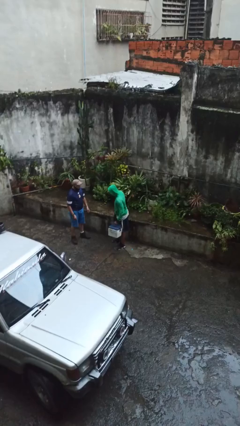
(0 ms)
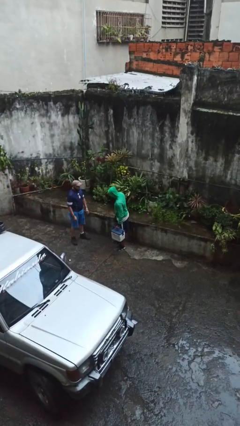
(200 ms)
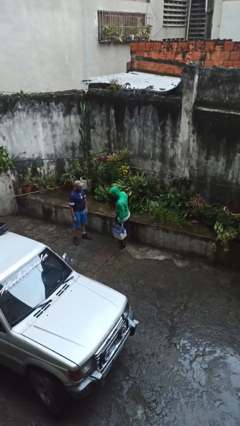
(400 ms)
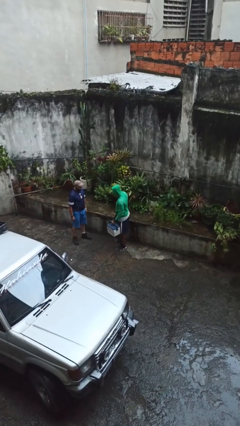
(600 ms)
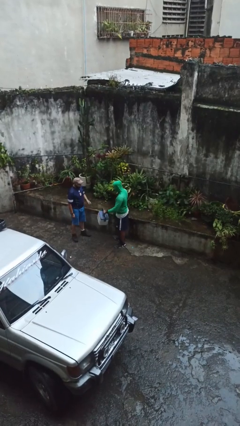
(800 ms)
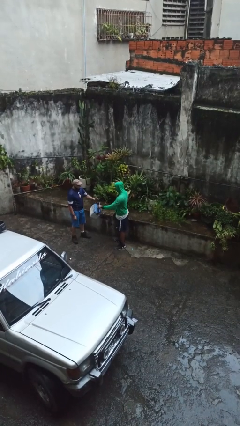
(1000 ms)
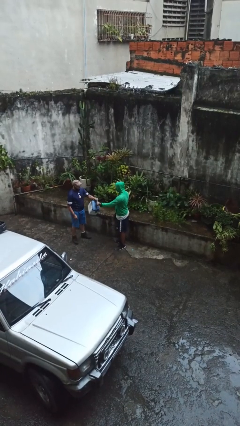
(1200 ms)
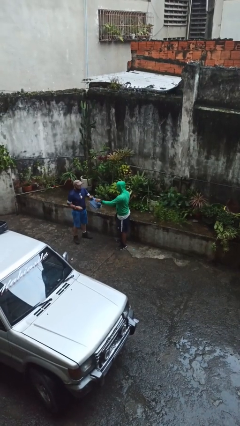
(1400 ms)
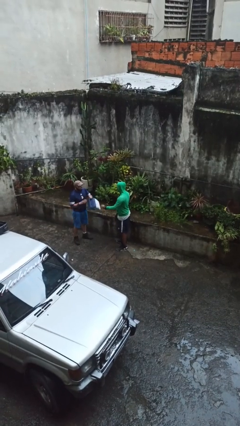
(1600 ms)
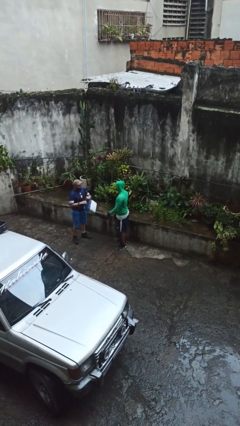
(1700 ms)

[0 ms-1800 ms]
person transfers object to person

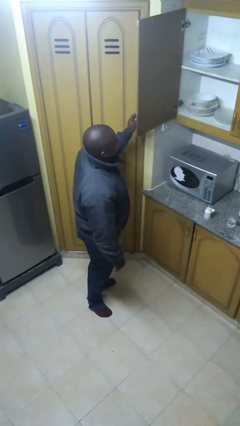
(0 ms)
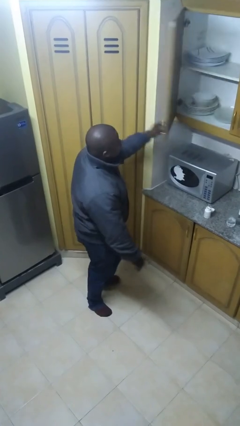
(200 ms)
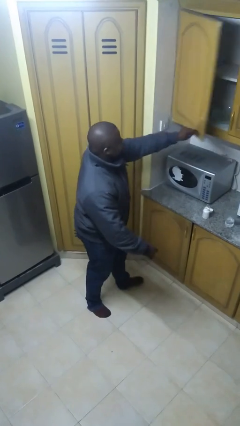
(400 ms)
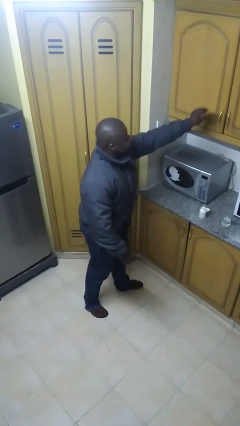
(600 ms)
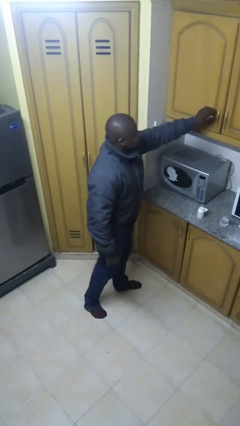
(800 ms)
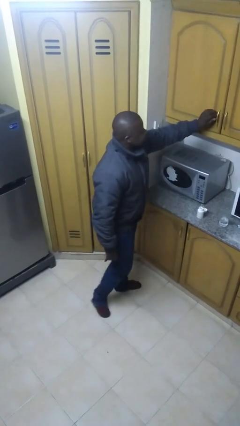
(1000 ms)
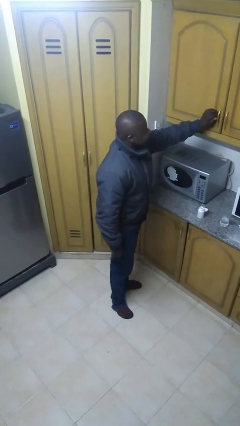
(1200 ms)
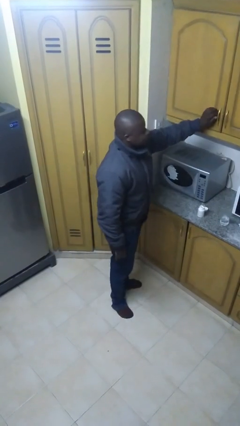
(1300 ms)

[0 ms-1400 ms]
person closes cabinet

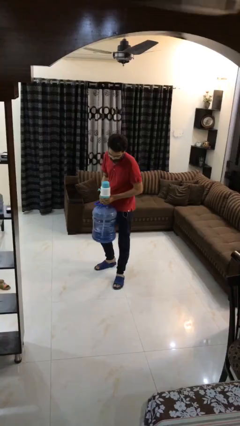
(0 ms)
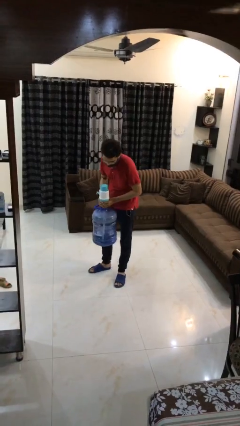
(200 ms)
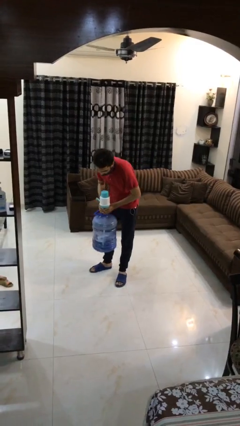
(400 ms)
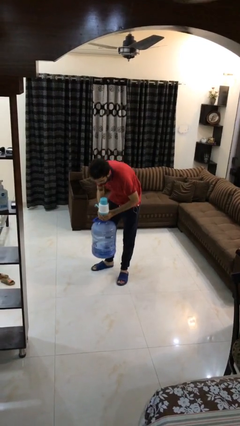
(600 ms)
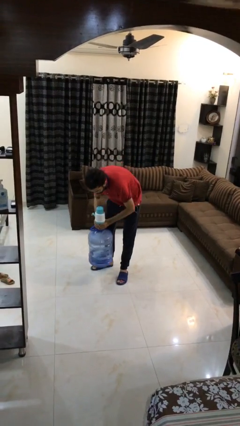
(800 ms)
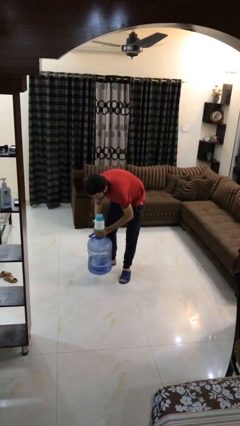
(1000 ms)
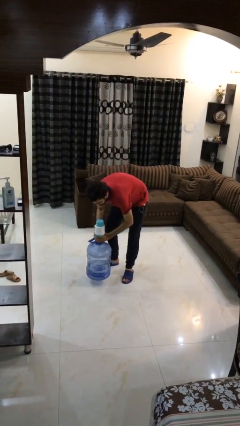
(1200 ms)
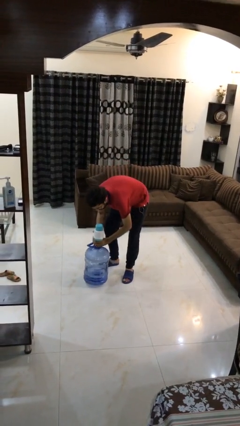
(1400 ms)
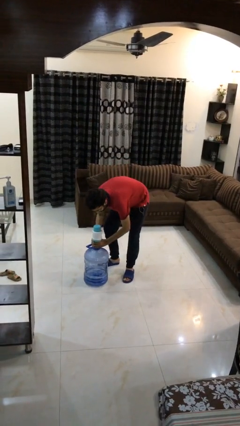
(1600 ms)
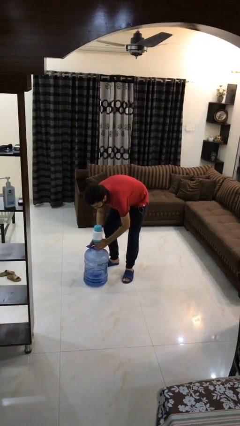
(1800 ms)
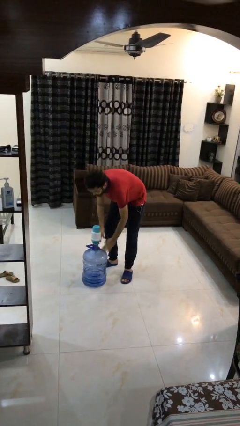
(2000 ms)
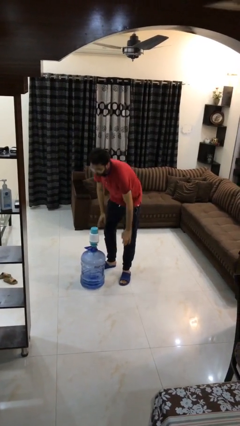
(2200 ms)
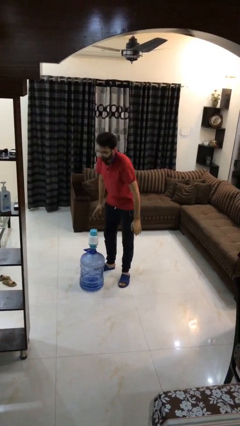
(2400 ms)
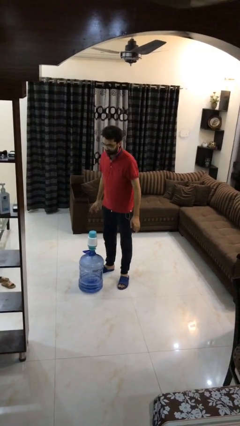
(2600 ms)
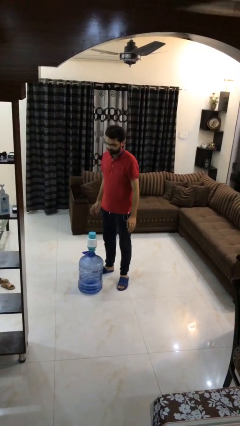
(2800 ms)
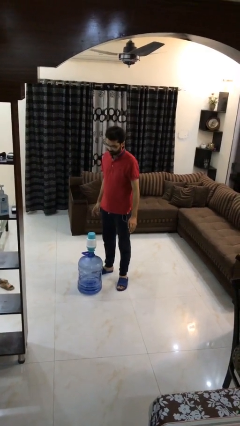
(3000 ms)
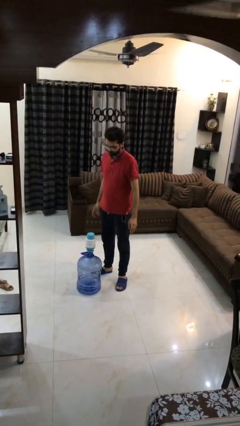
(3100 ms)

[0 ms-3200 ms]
person puts down object on floor

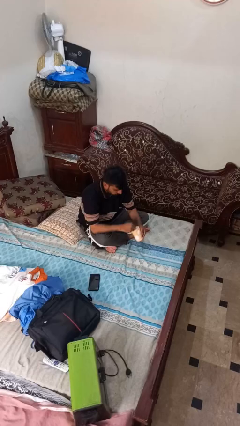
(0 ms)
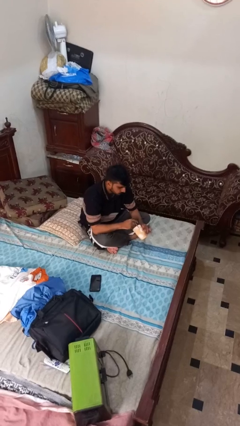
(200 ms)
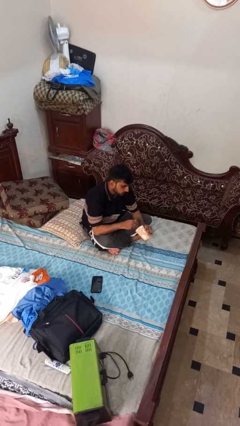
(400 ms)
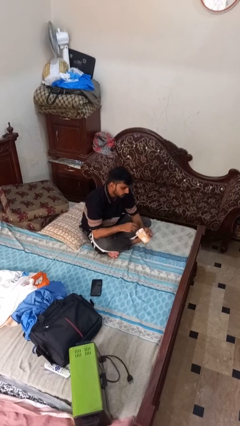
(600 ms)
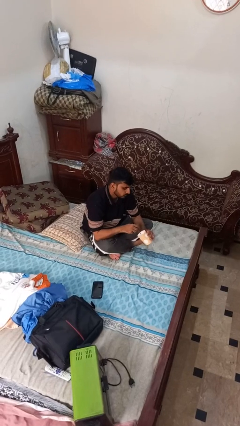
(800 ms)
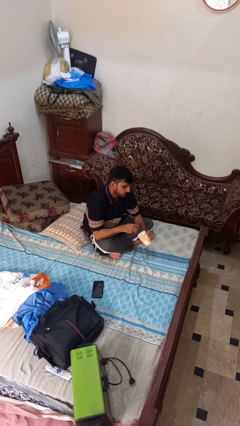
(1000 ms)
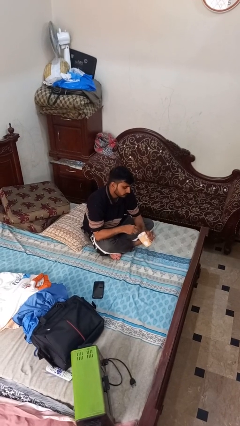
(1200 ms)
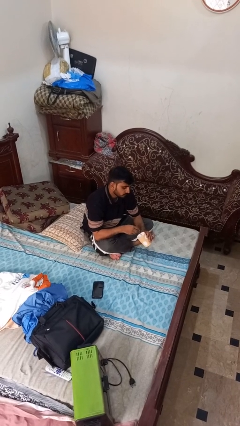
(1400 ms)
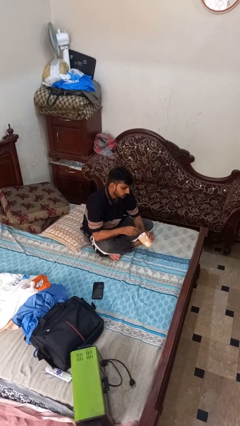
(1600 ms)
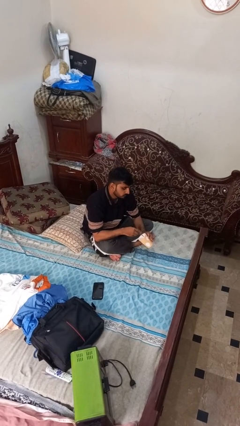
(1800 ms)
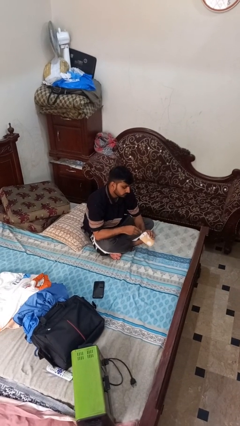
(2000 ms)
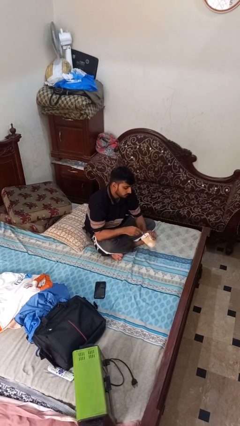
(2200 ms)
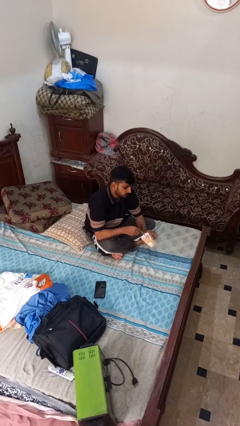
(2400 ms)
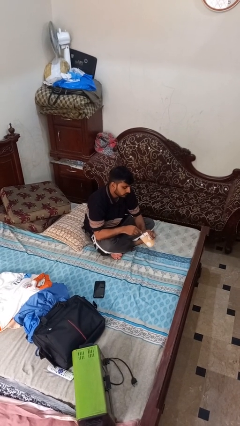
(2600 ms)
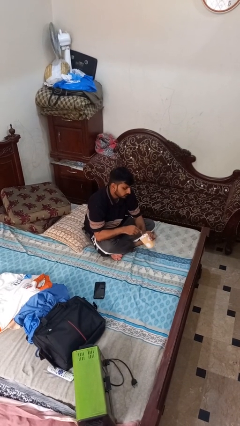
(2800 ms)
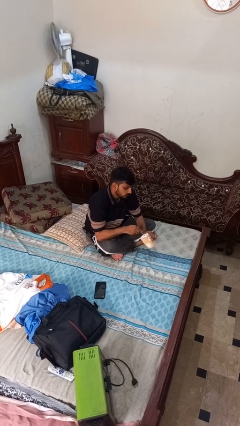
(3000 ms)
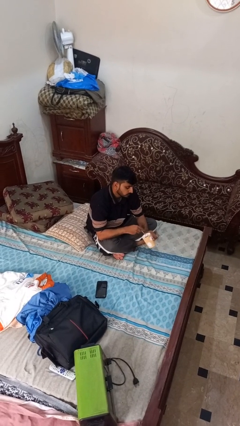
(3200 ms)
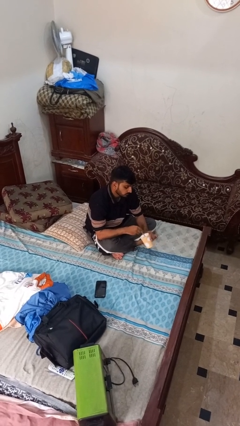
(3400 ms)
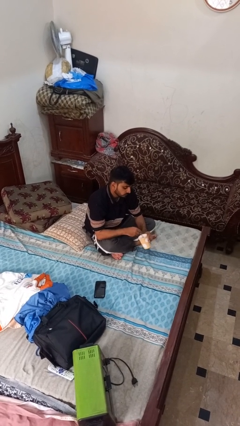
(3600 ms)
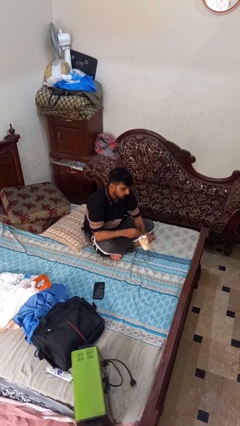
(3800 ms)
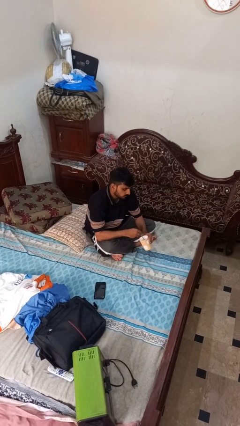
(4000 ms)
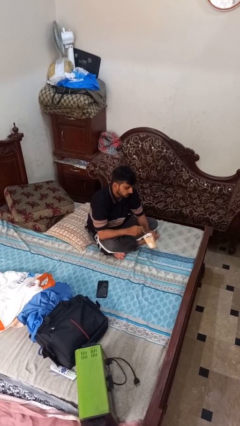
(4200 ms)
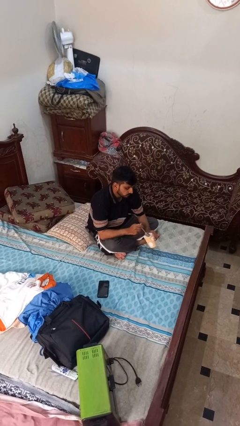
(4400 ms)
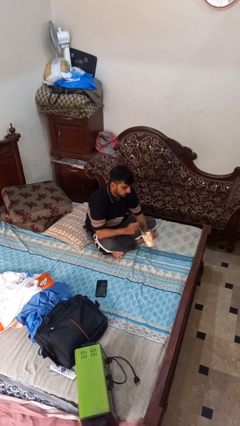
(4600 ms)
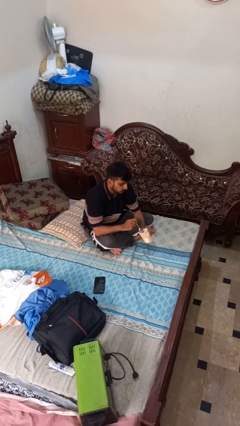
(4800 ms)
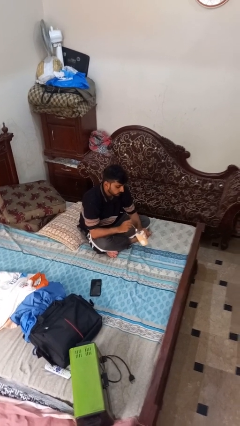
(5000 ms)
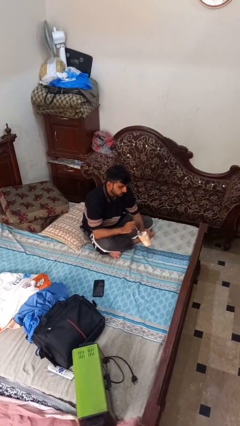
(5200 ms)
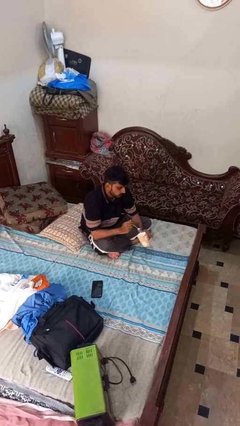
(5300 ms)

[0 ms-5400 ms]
person stirs mug

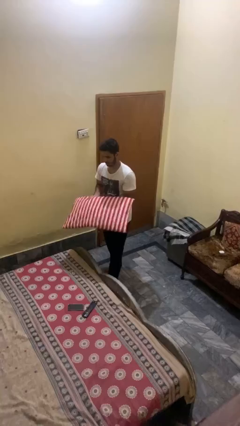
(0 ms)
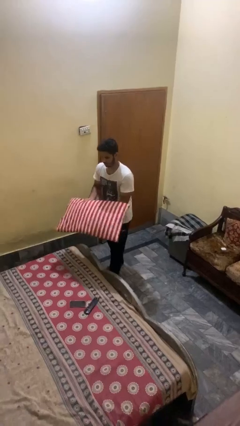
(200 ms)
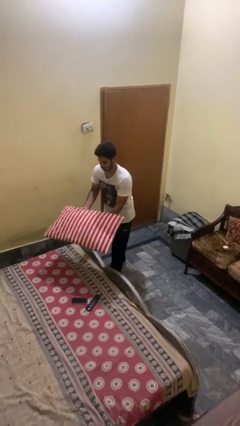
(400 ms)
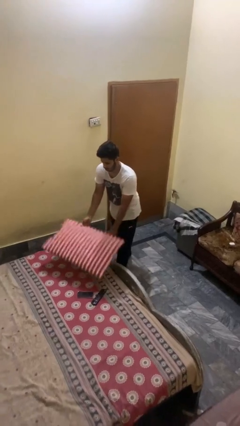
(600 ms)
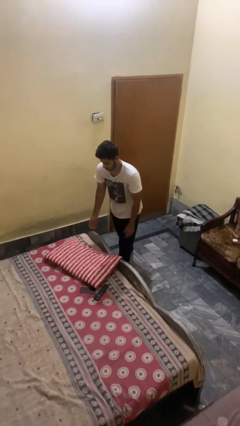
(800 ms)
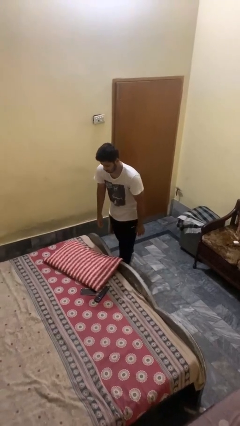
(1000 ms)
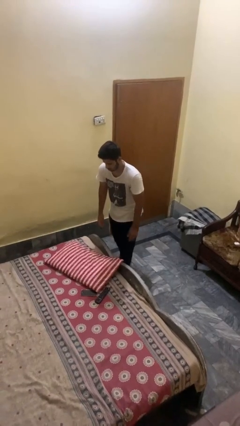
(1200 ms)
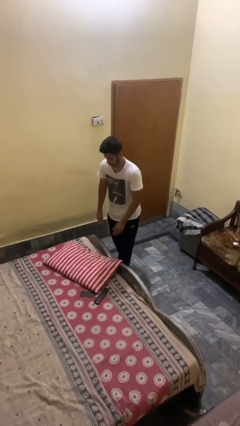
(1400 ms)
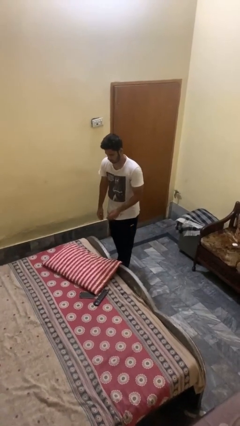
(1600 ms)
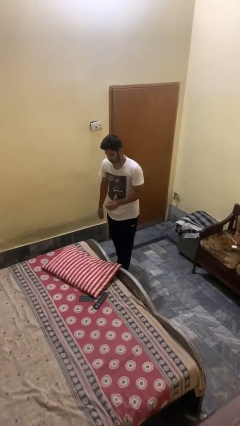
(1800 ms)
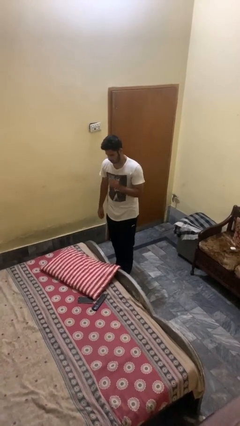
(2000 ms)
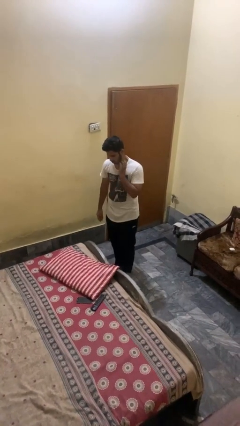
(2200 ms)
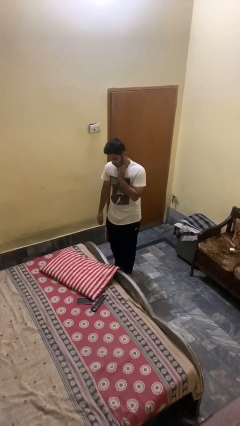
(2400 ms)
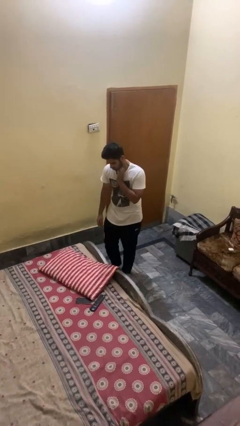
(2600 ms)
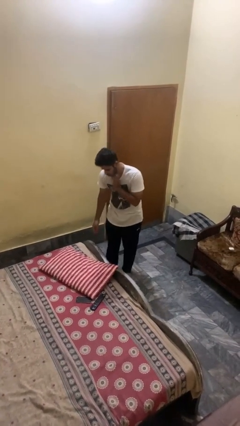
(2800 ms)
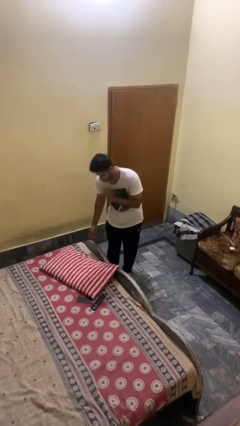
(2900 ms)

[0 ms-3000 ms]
person puts down object on bed

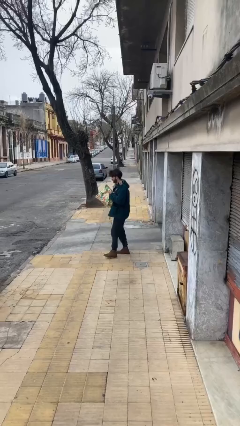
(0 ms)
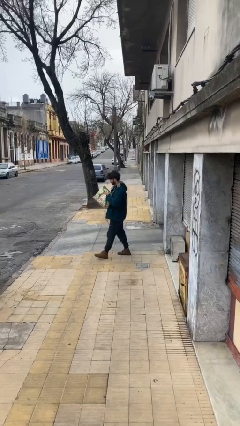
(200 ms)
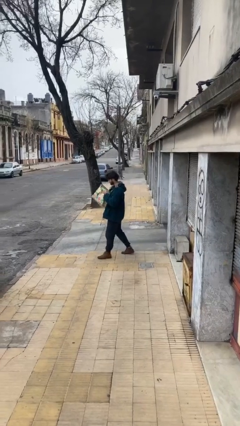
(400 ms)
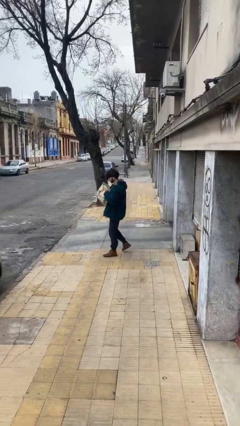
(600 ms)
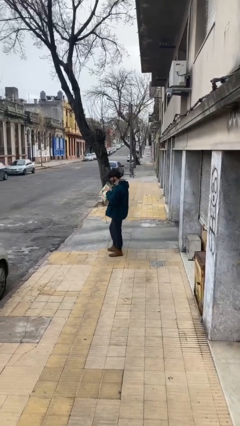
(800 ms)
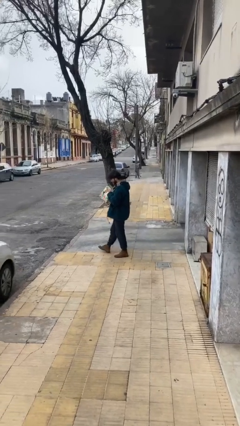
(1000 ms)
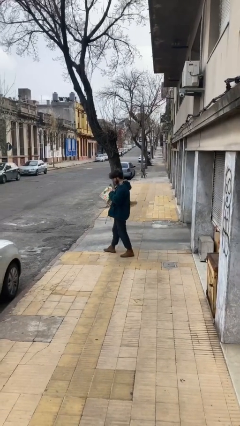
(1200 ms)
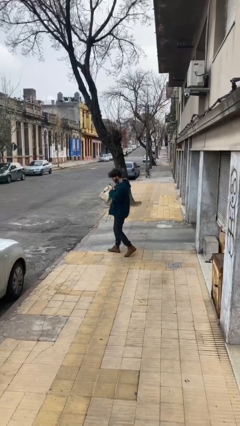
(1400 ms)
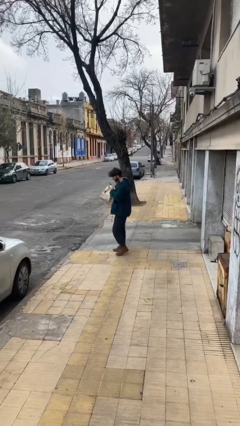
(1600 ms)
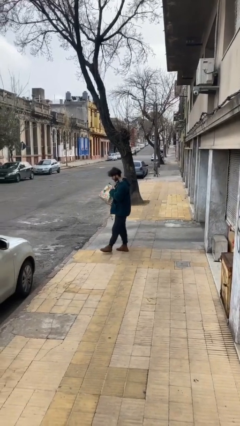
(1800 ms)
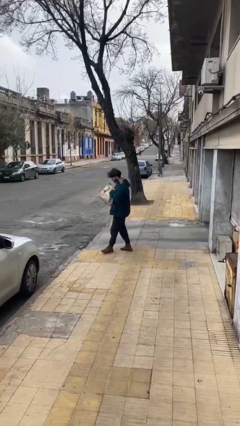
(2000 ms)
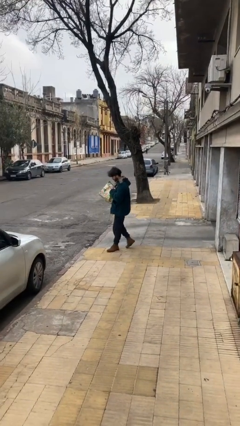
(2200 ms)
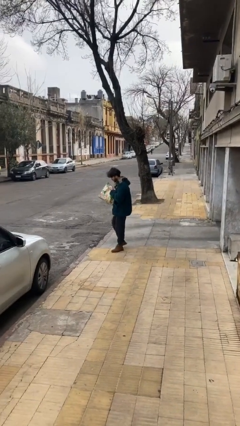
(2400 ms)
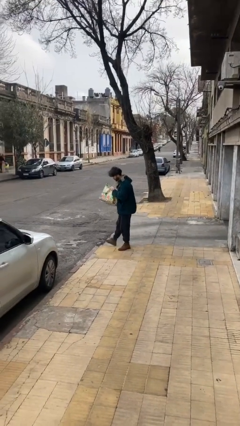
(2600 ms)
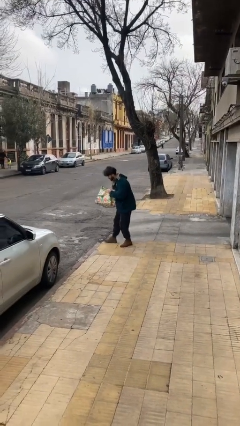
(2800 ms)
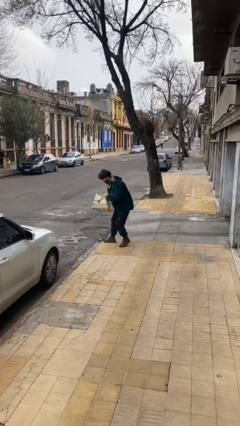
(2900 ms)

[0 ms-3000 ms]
person carries heavy object
